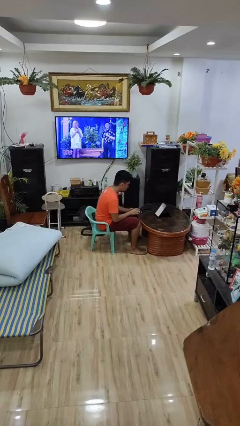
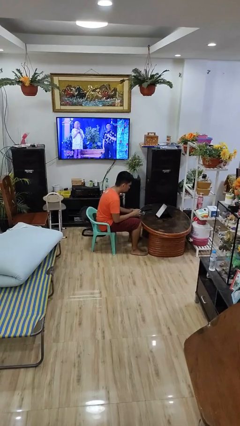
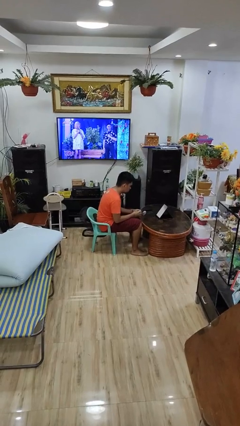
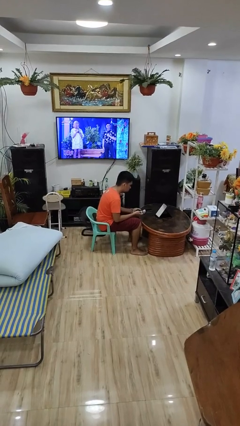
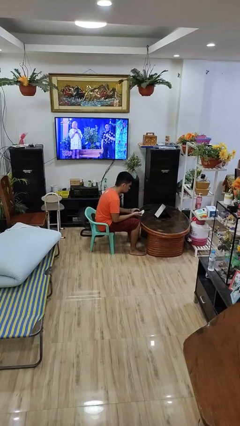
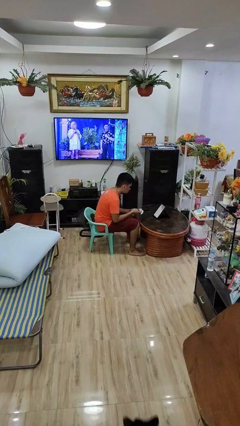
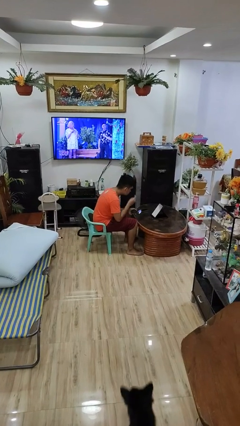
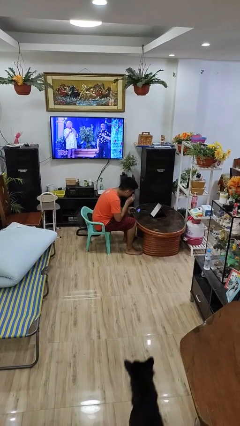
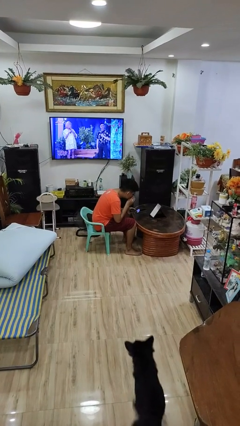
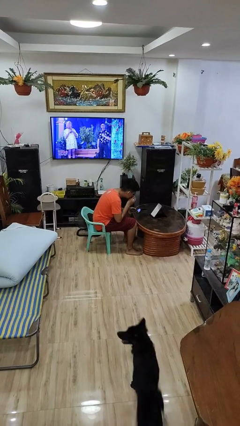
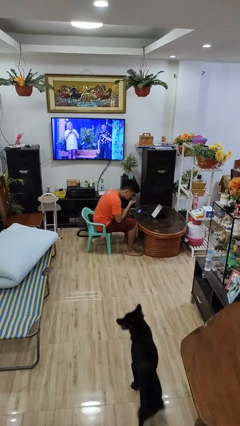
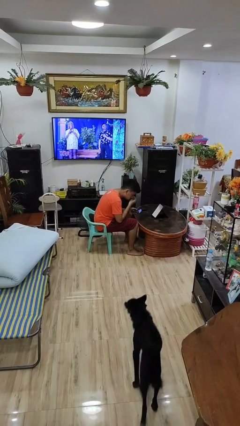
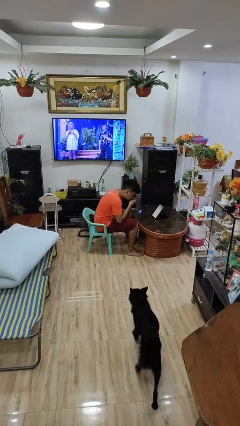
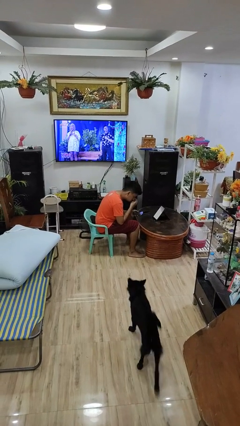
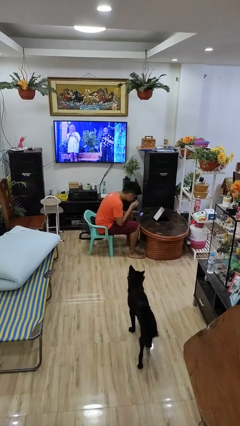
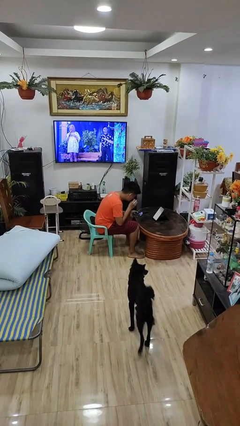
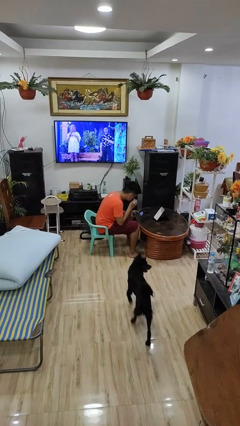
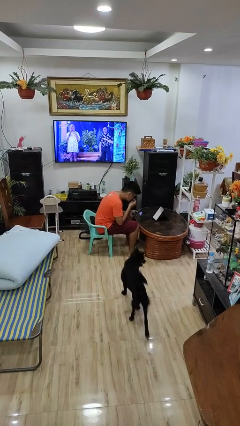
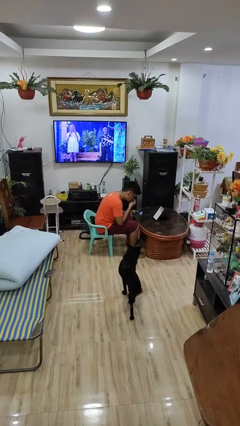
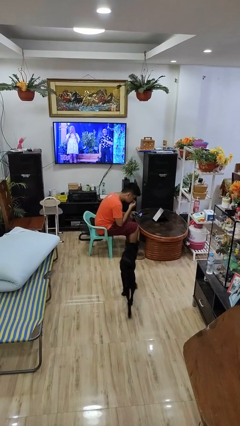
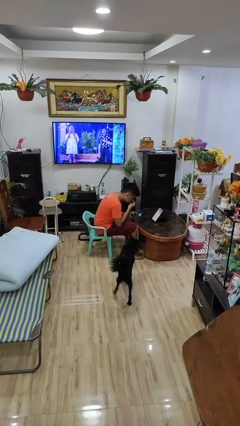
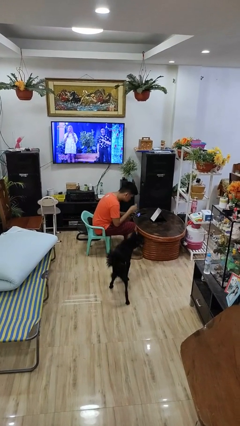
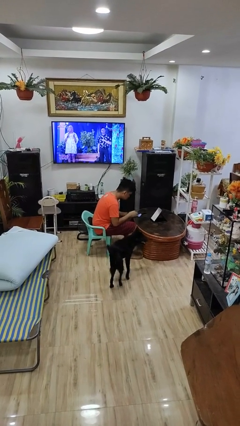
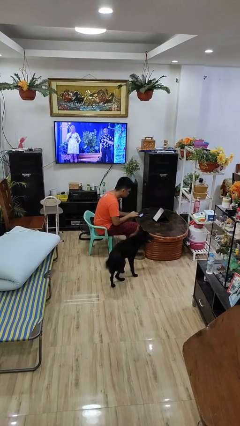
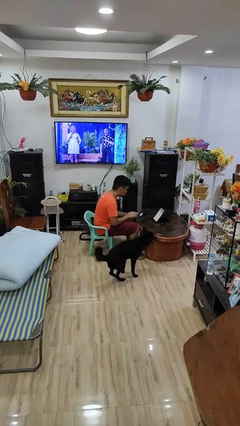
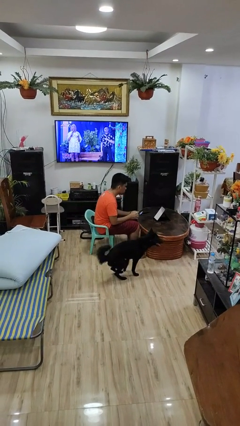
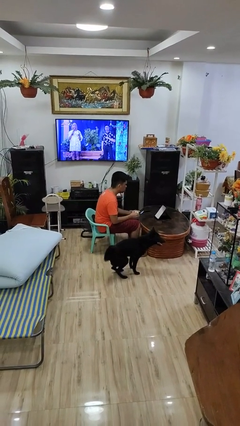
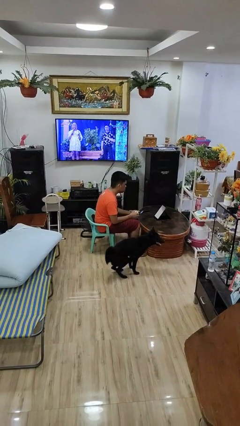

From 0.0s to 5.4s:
person applies foundation makeup

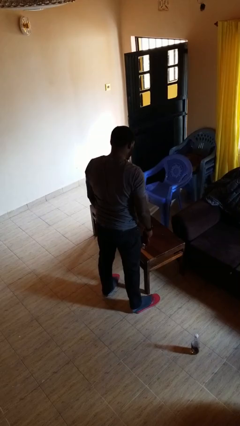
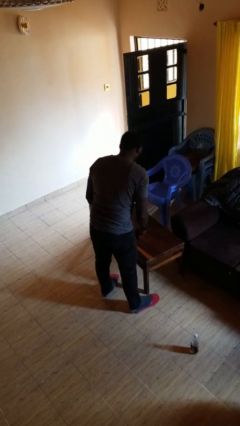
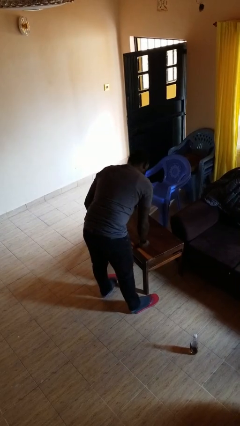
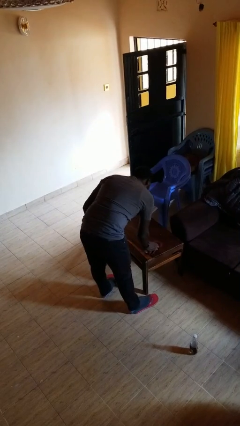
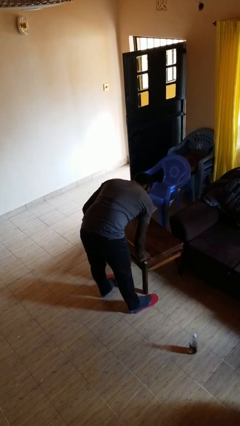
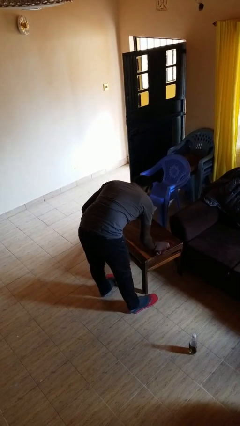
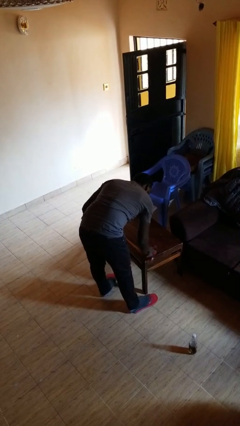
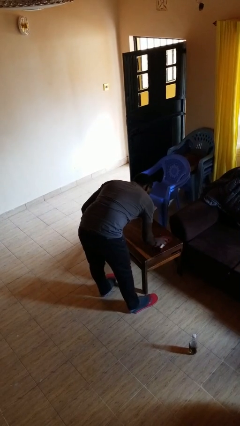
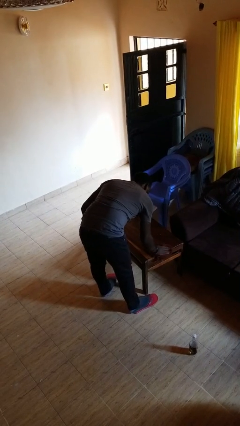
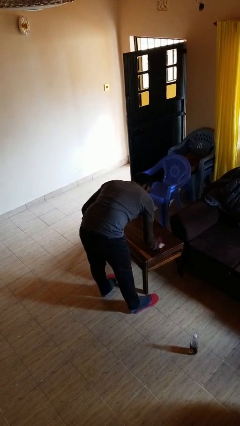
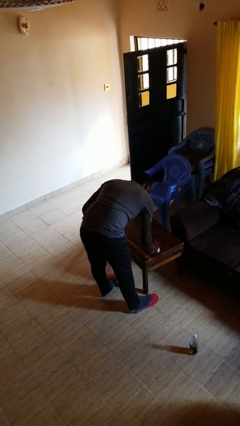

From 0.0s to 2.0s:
person cleans table with rag

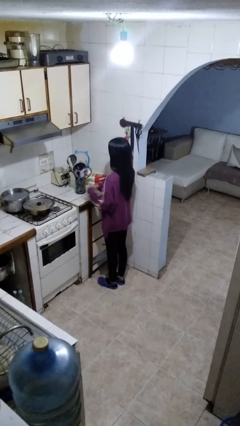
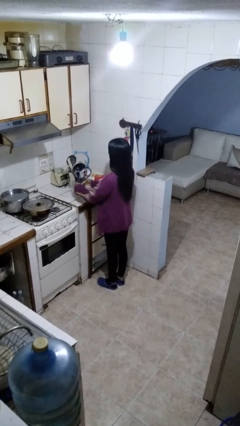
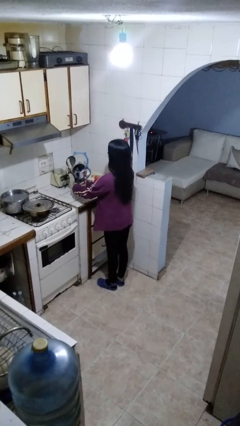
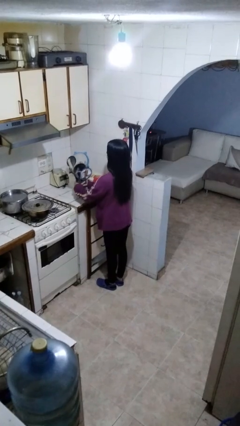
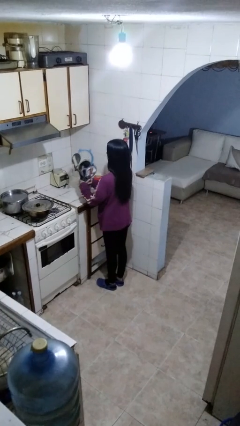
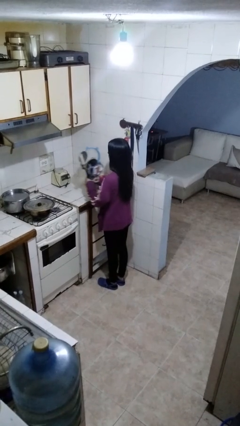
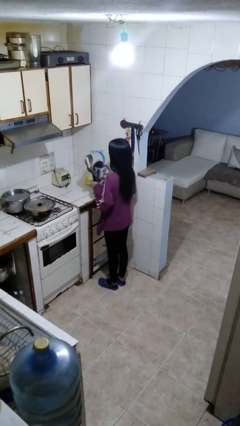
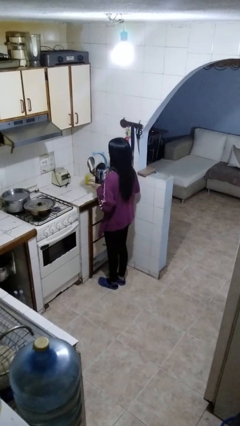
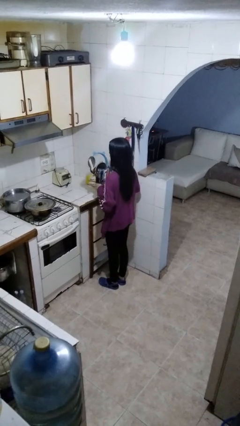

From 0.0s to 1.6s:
person puts down object on countertop

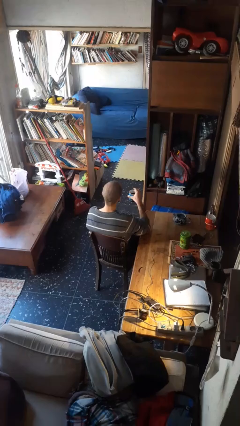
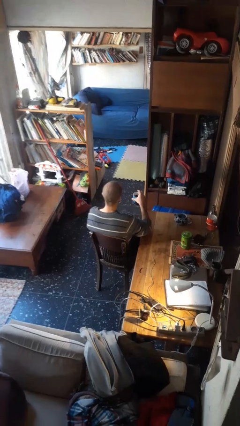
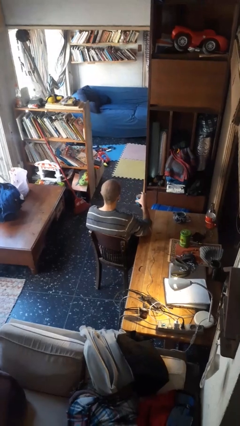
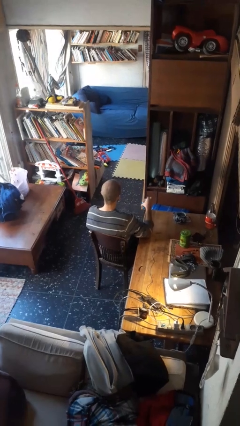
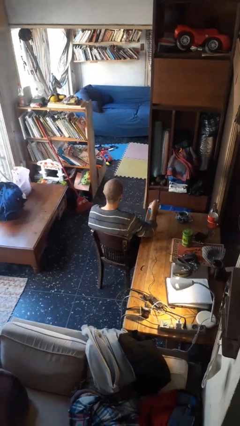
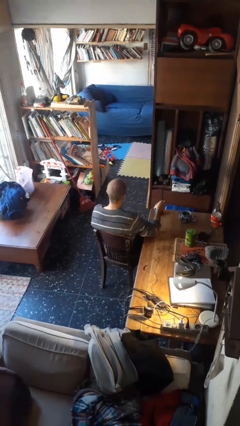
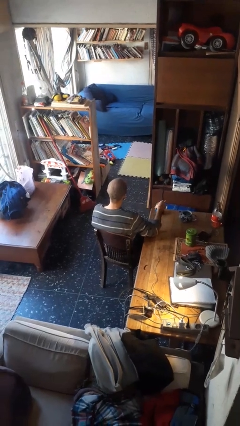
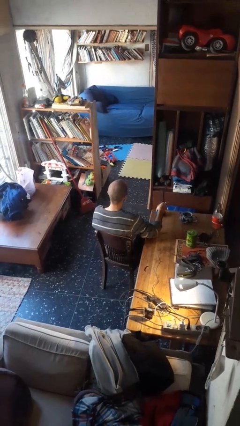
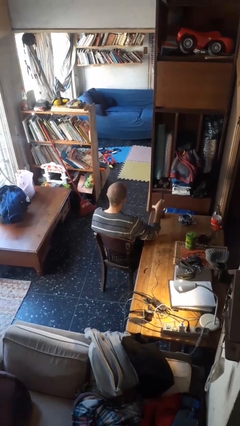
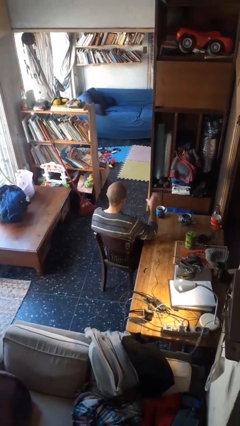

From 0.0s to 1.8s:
person puts down object on table

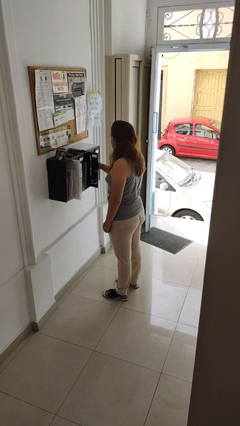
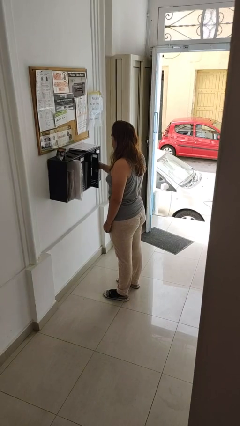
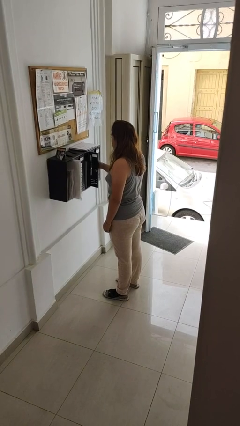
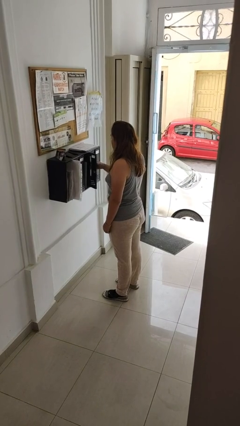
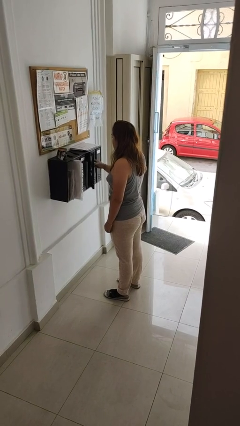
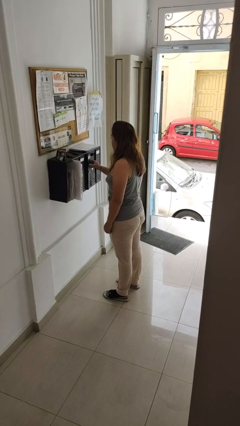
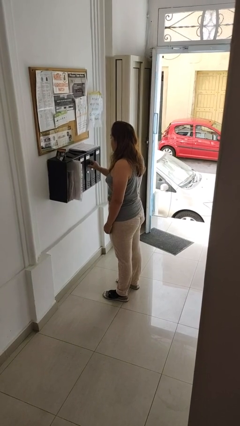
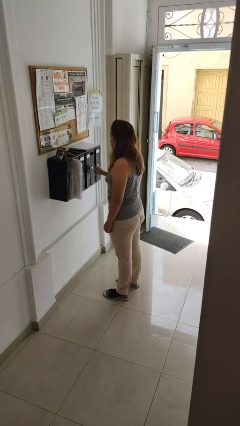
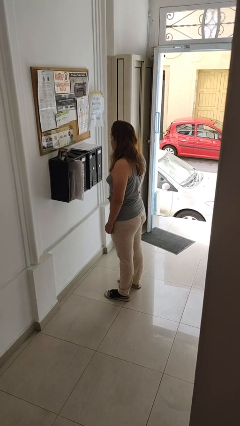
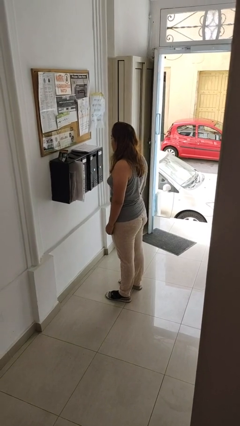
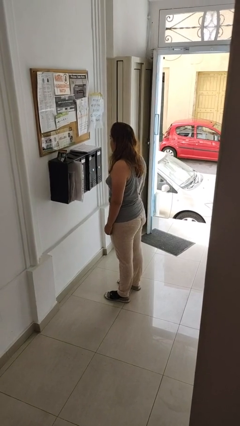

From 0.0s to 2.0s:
person closes mailbox

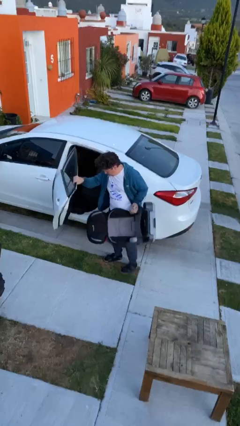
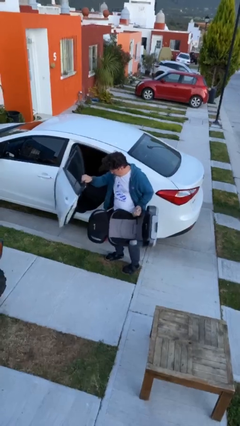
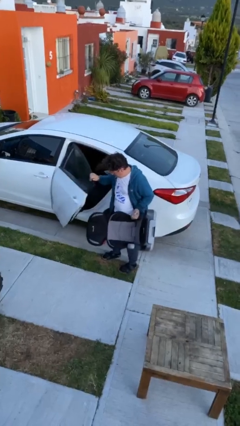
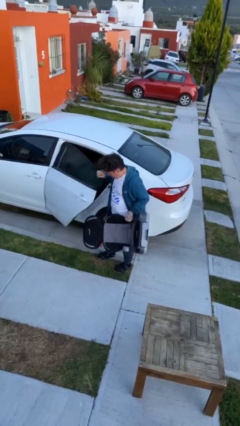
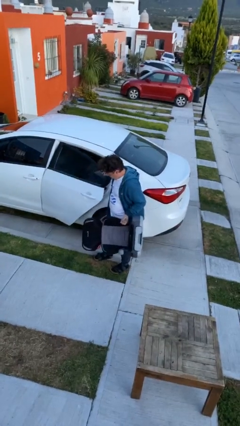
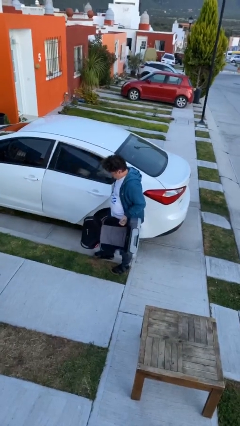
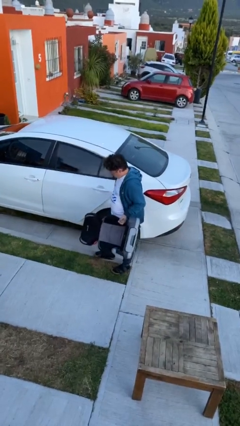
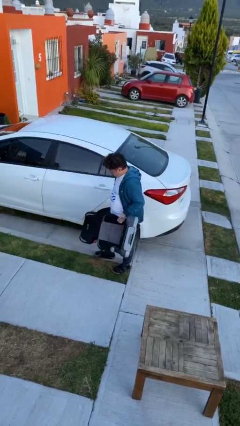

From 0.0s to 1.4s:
person closes car door

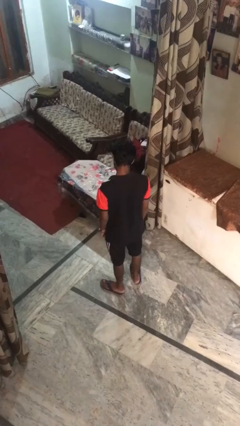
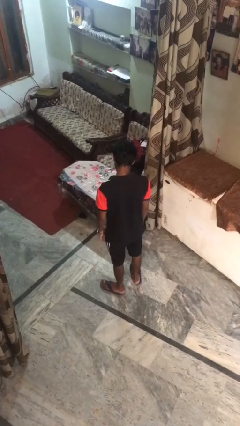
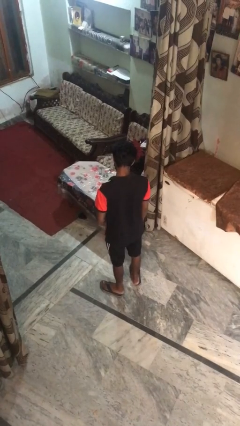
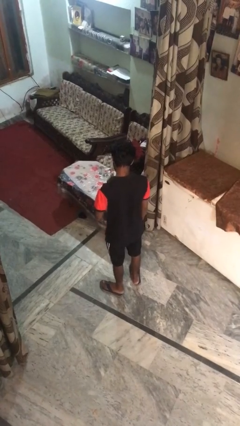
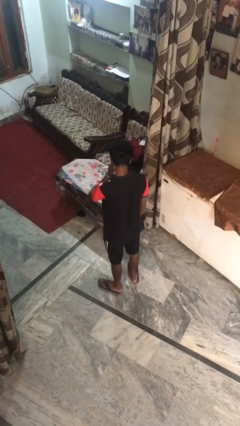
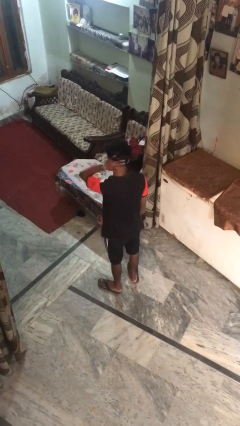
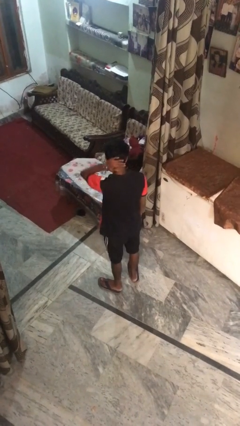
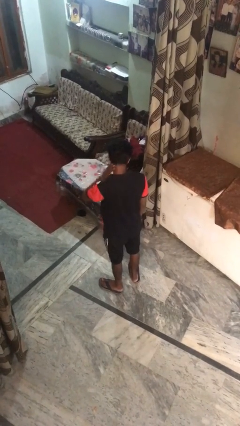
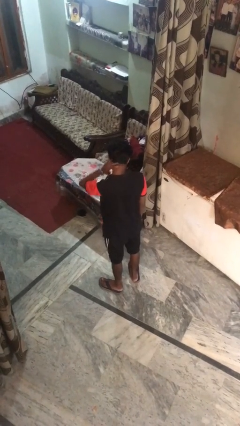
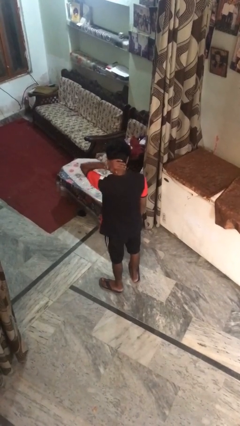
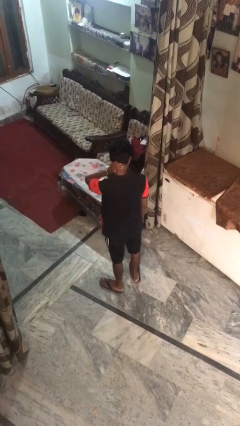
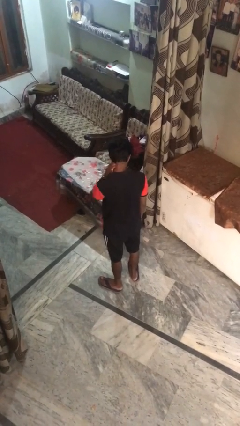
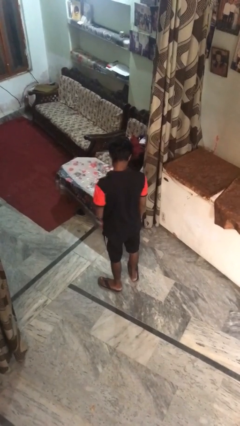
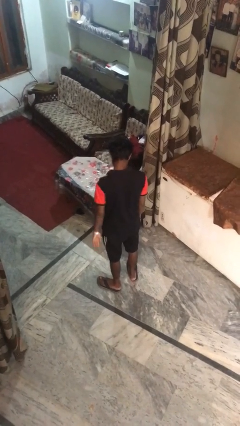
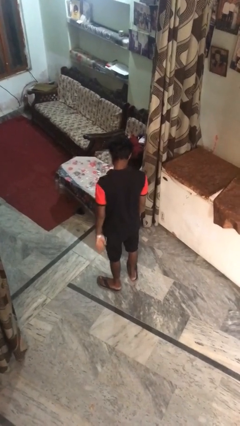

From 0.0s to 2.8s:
person rubs neck
